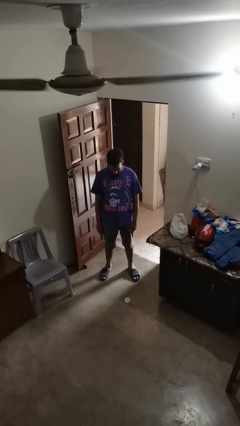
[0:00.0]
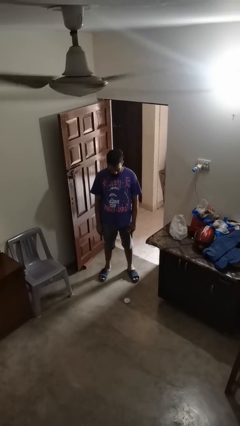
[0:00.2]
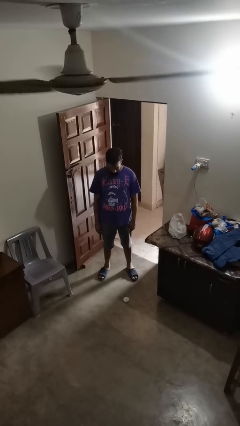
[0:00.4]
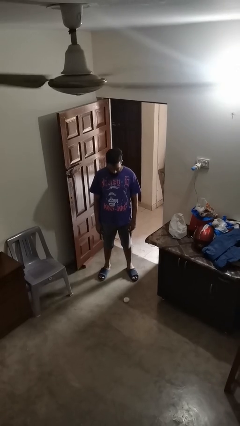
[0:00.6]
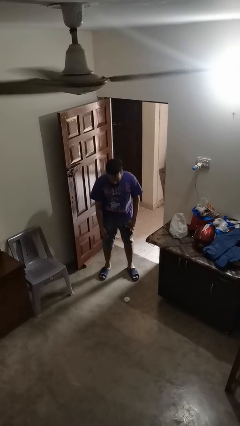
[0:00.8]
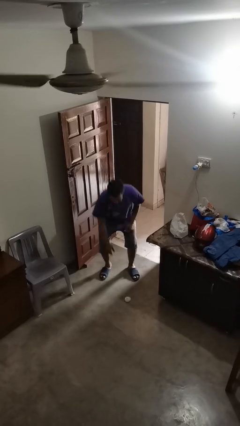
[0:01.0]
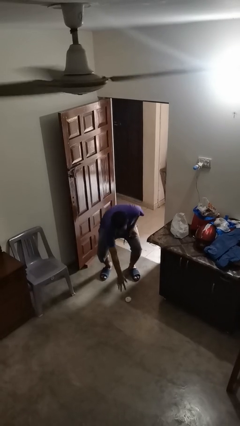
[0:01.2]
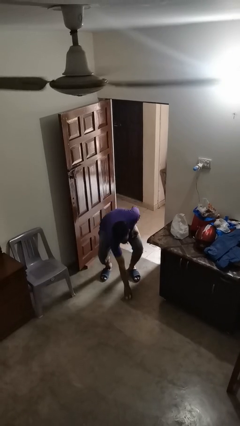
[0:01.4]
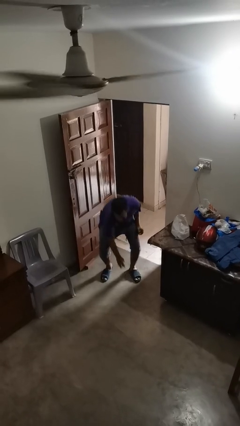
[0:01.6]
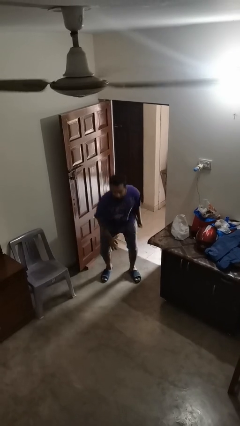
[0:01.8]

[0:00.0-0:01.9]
person picks up object from floor

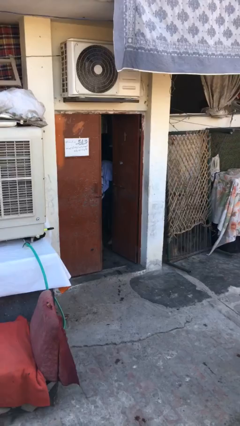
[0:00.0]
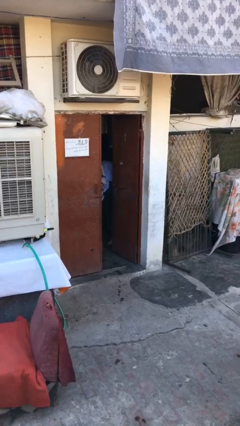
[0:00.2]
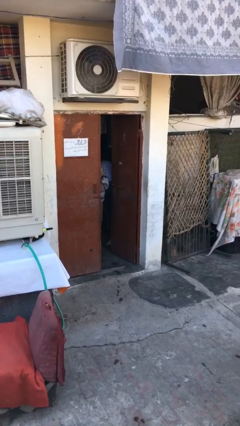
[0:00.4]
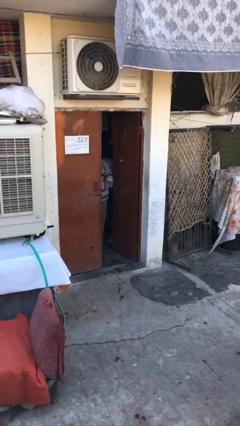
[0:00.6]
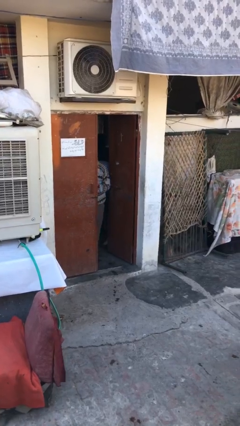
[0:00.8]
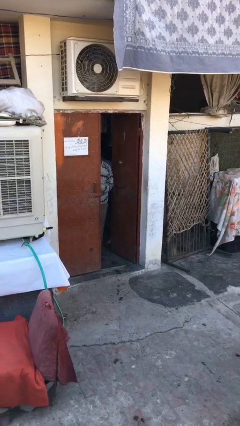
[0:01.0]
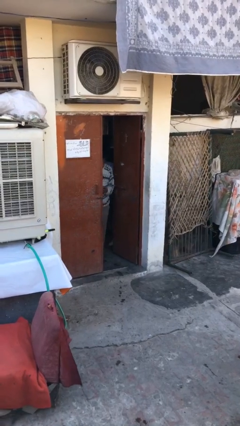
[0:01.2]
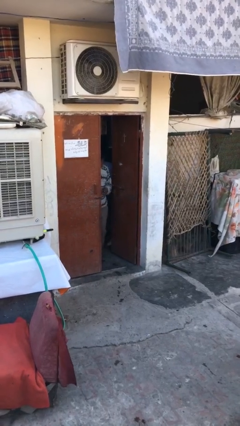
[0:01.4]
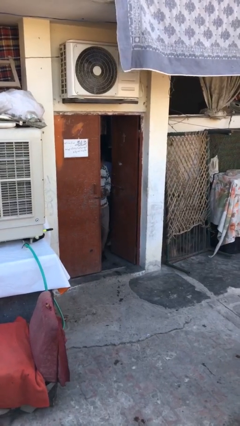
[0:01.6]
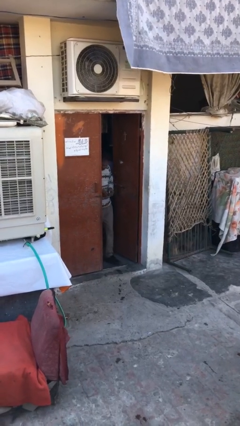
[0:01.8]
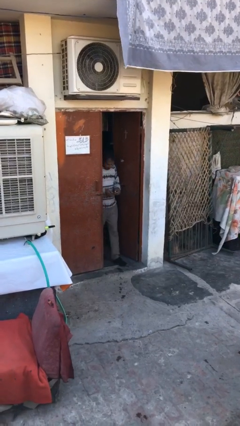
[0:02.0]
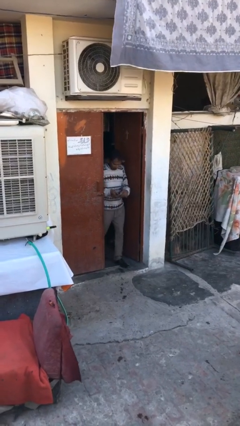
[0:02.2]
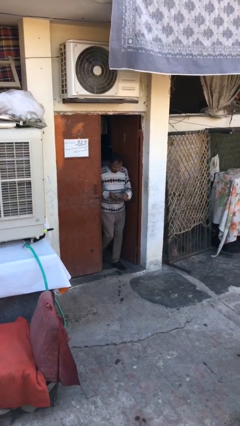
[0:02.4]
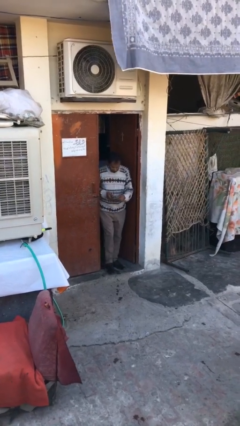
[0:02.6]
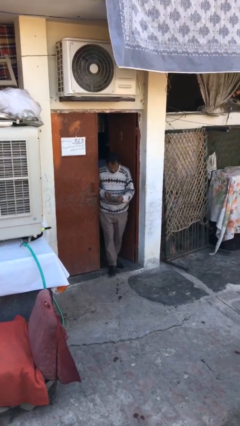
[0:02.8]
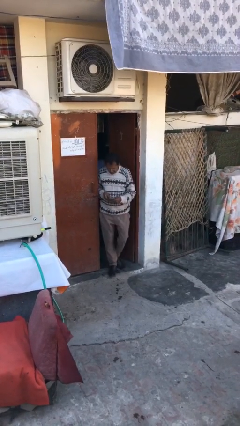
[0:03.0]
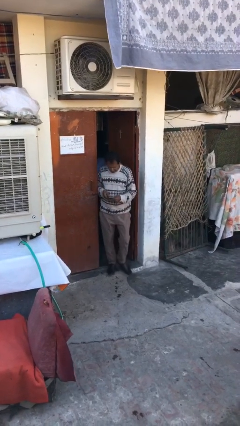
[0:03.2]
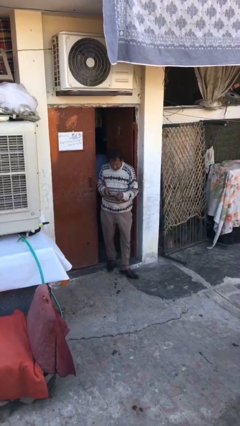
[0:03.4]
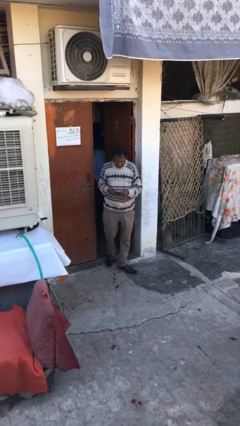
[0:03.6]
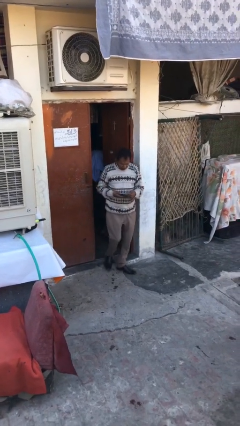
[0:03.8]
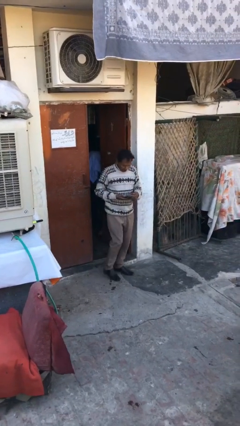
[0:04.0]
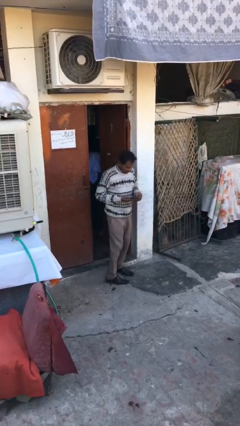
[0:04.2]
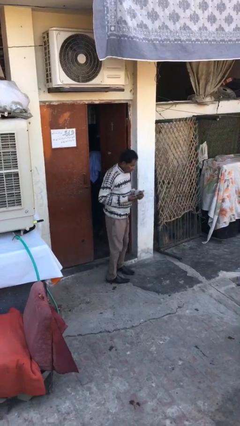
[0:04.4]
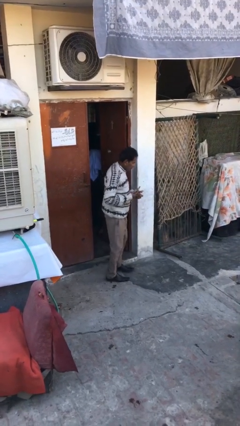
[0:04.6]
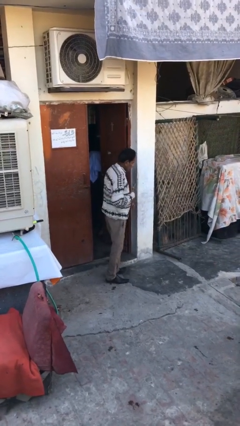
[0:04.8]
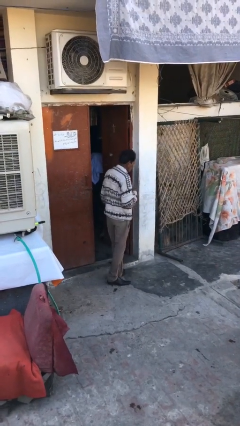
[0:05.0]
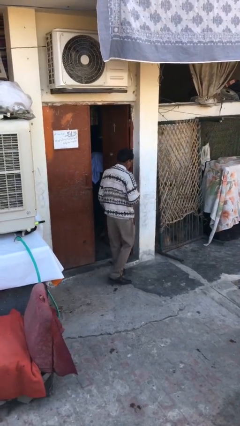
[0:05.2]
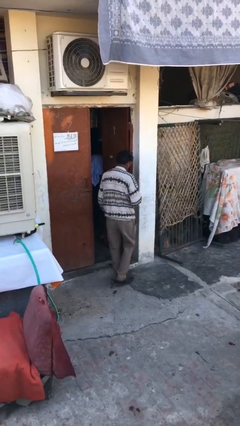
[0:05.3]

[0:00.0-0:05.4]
person enters scene through structure

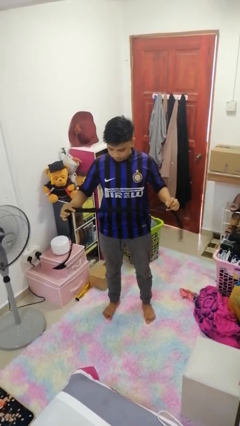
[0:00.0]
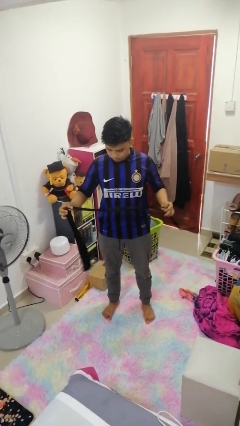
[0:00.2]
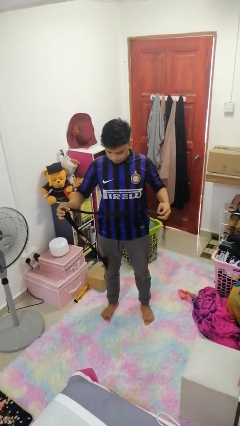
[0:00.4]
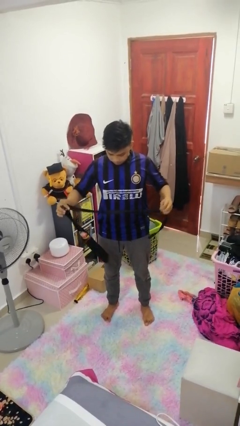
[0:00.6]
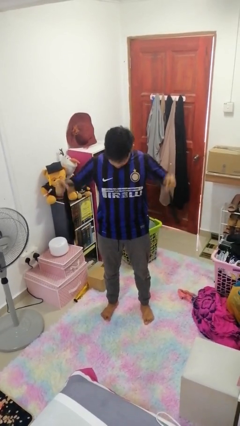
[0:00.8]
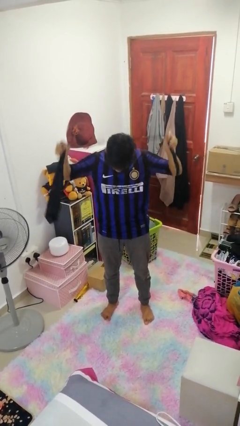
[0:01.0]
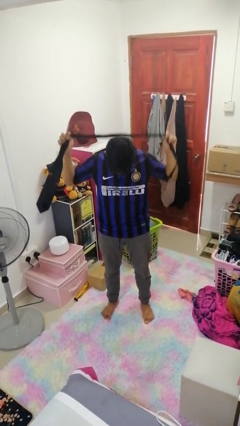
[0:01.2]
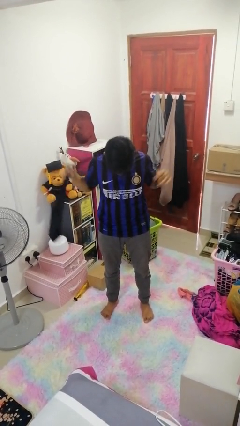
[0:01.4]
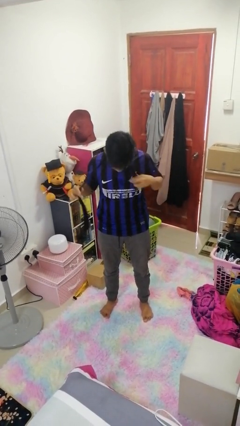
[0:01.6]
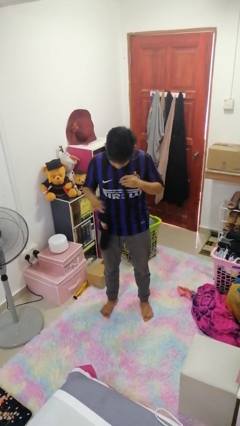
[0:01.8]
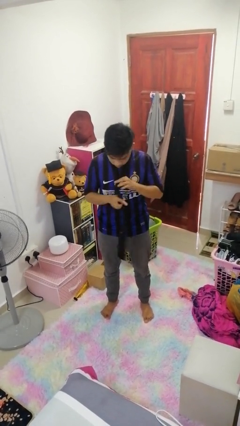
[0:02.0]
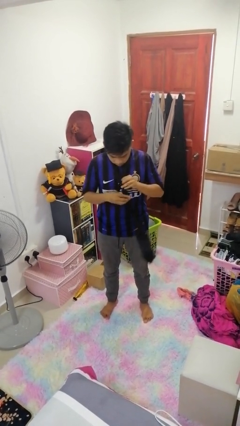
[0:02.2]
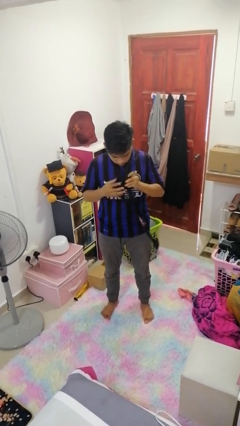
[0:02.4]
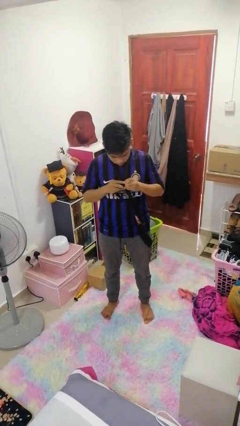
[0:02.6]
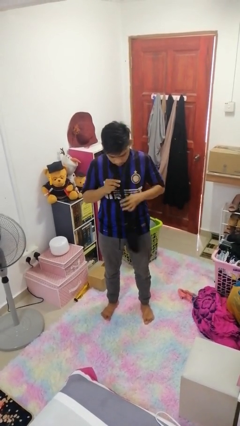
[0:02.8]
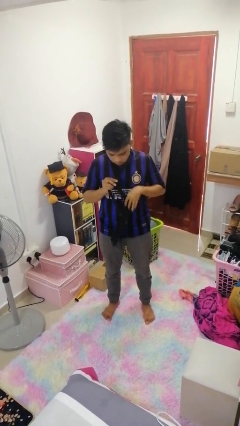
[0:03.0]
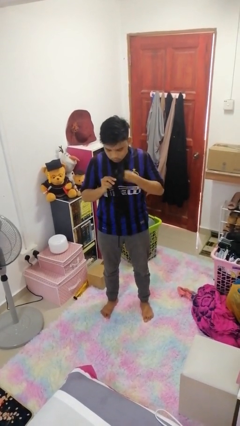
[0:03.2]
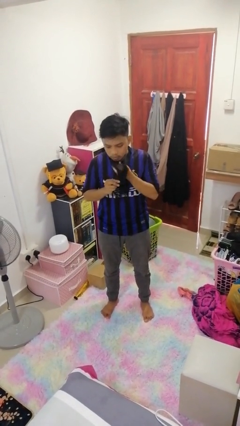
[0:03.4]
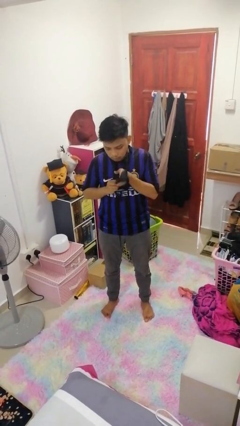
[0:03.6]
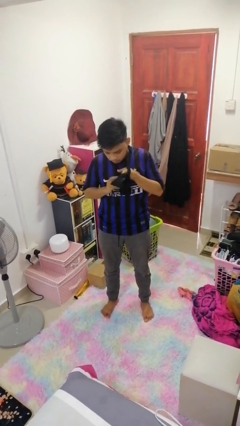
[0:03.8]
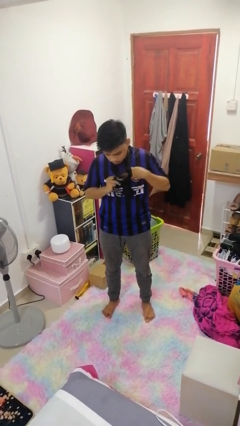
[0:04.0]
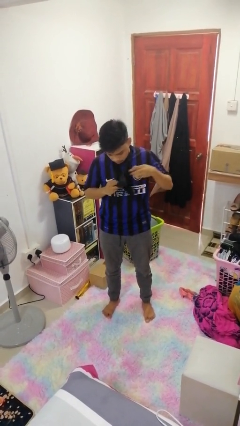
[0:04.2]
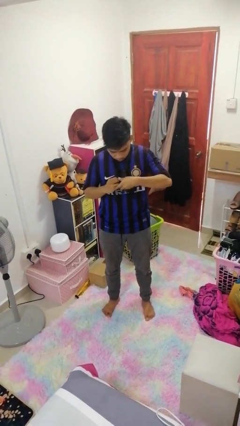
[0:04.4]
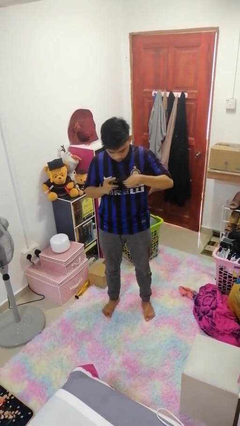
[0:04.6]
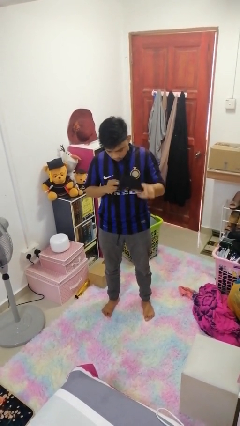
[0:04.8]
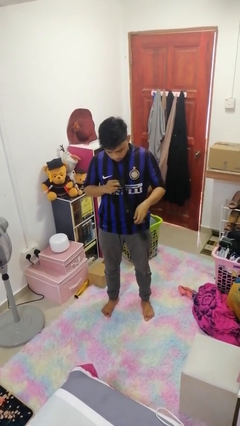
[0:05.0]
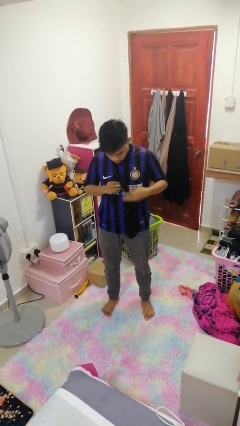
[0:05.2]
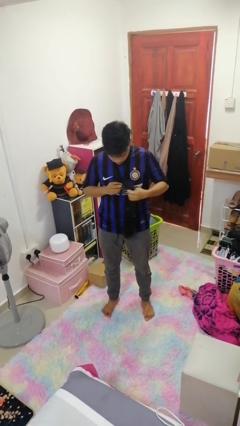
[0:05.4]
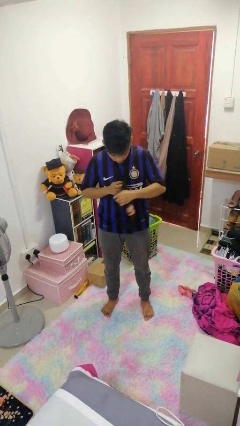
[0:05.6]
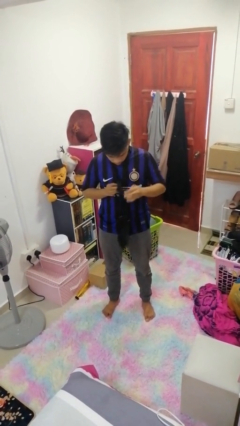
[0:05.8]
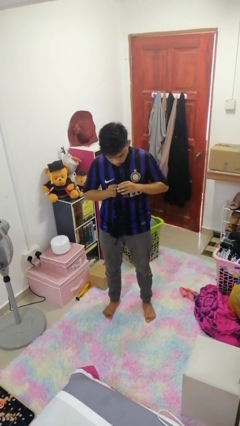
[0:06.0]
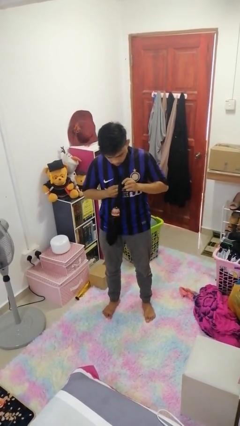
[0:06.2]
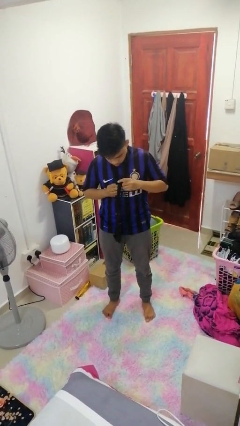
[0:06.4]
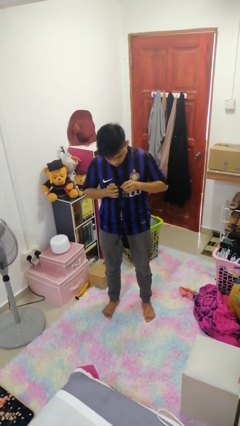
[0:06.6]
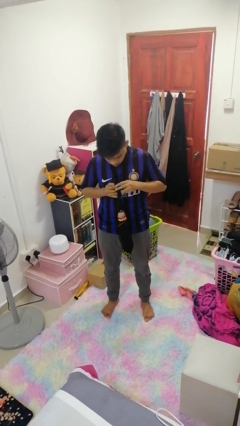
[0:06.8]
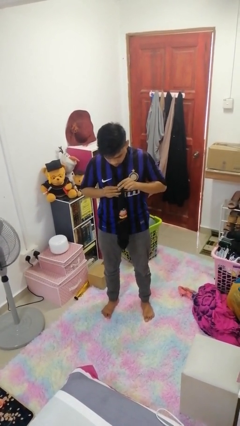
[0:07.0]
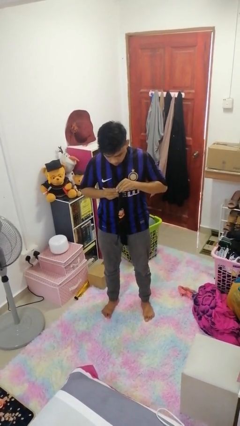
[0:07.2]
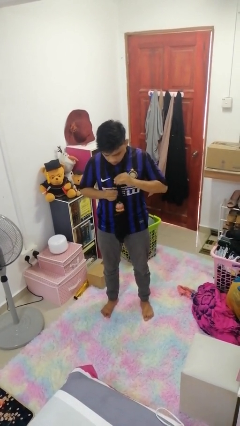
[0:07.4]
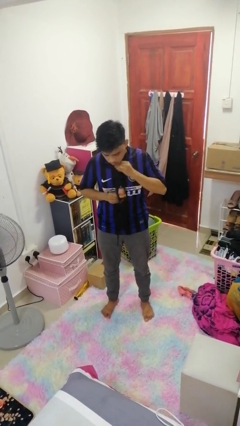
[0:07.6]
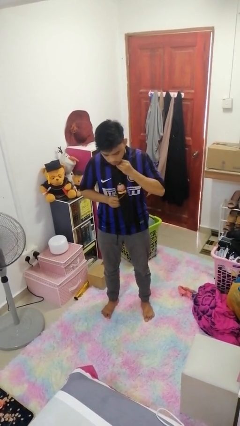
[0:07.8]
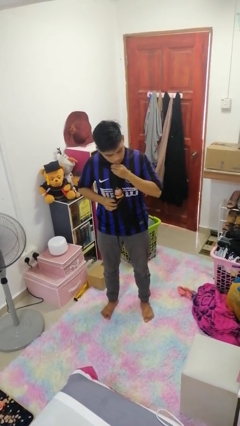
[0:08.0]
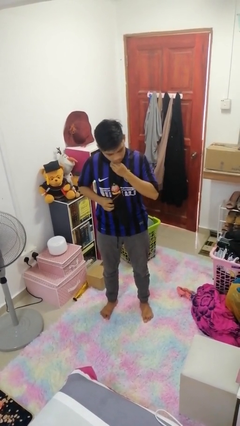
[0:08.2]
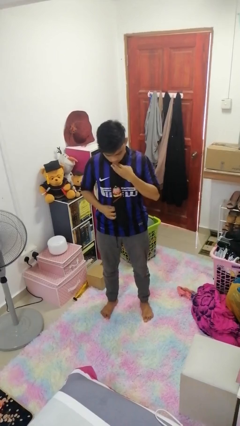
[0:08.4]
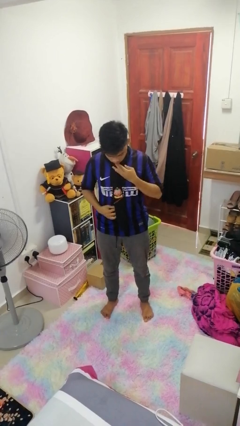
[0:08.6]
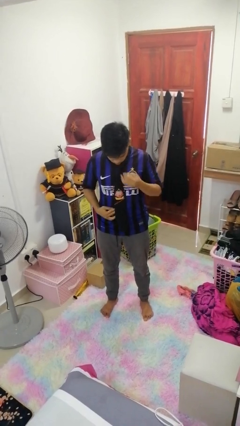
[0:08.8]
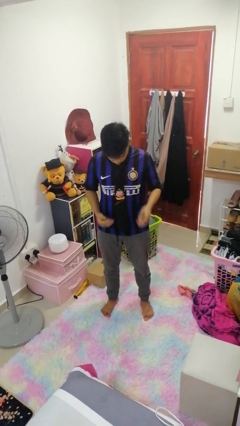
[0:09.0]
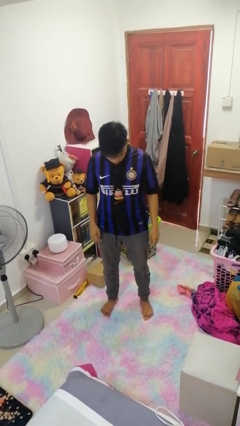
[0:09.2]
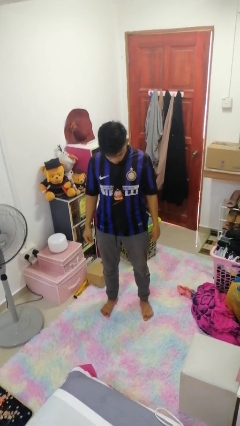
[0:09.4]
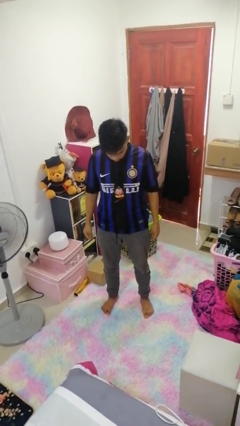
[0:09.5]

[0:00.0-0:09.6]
person puts on necktie

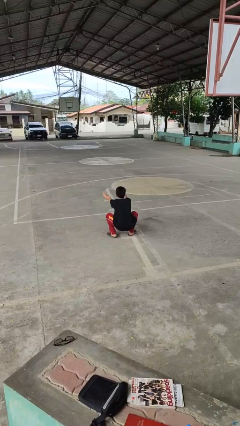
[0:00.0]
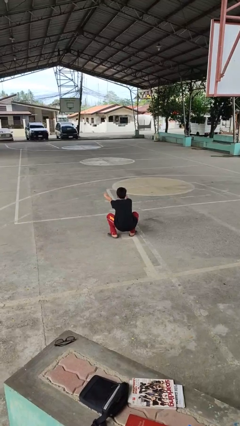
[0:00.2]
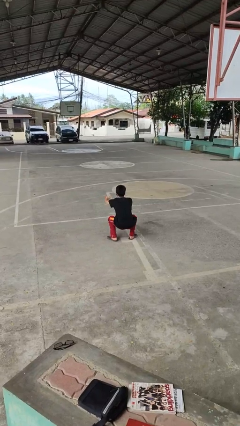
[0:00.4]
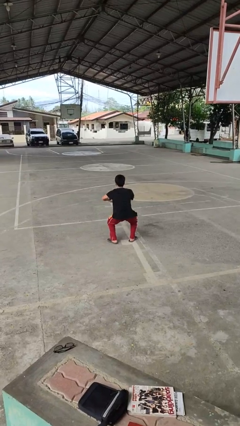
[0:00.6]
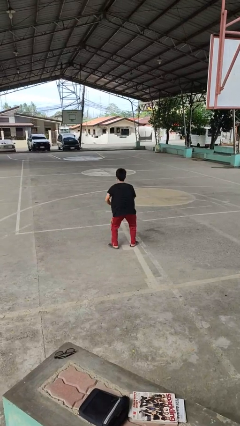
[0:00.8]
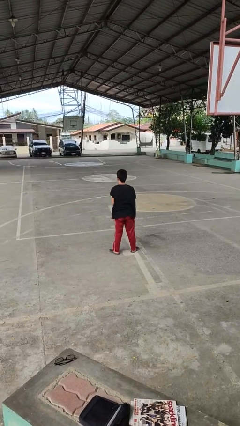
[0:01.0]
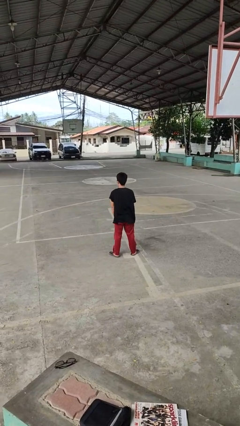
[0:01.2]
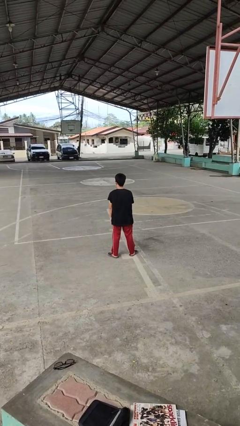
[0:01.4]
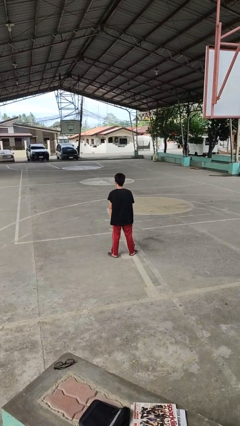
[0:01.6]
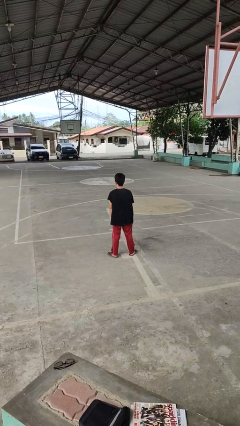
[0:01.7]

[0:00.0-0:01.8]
person stands up
